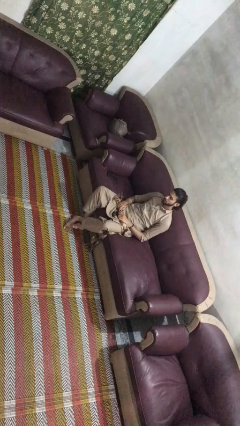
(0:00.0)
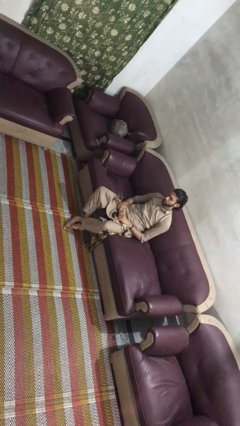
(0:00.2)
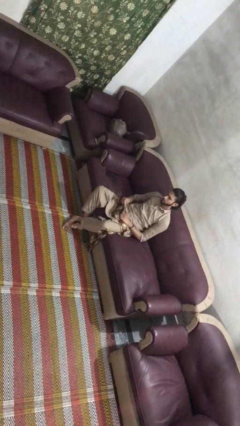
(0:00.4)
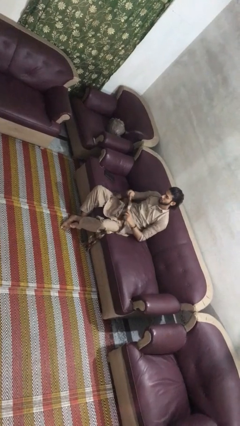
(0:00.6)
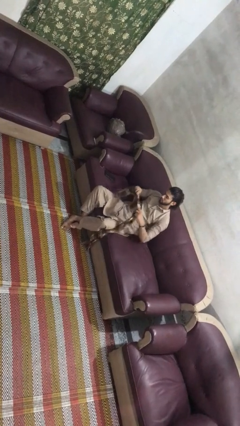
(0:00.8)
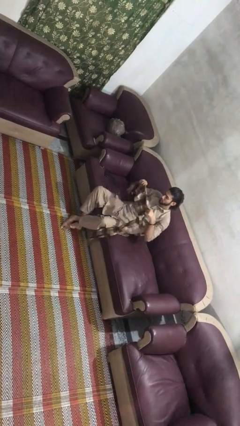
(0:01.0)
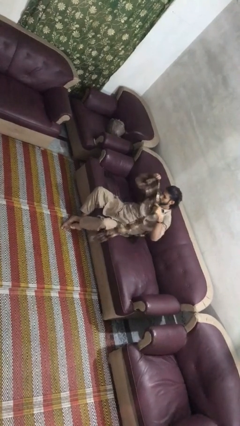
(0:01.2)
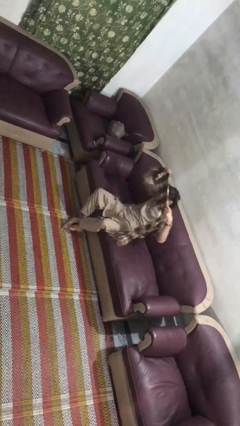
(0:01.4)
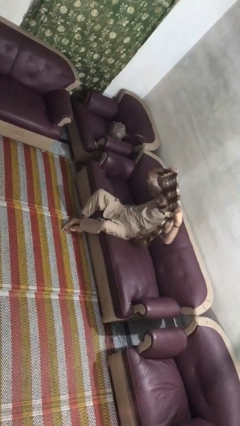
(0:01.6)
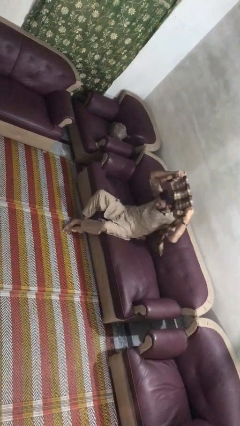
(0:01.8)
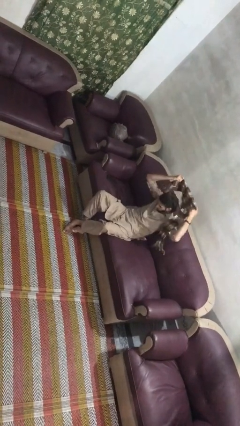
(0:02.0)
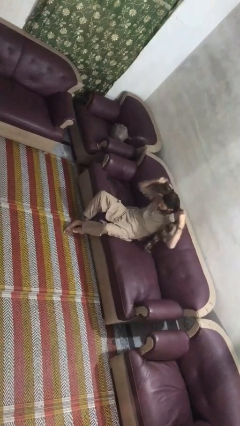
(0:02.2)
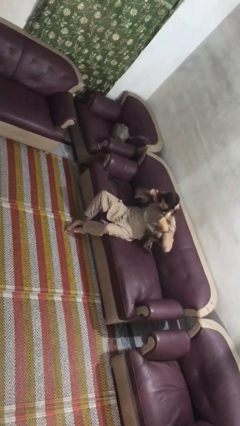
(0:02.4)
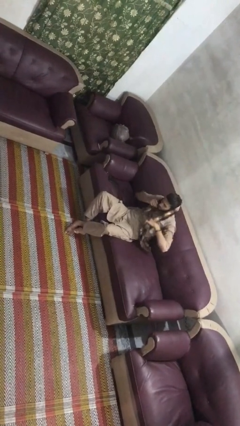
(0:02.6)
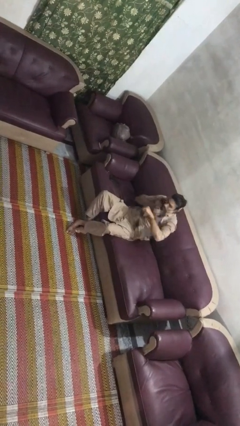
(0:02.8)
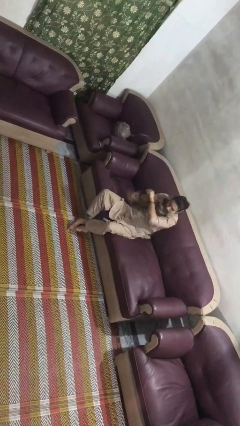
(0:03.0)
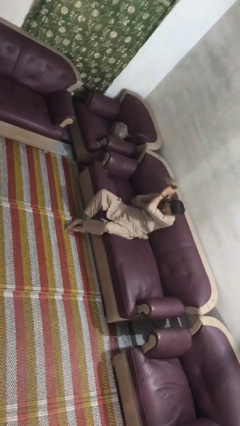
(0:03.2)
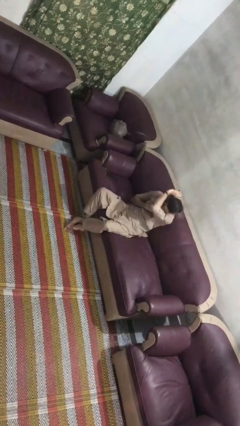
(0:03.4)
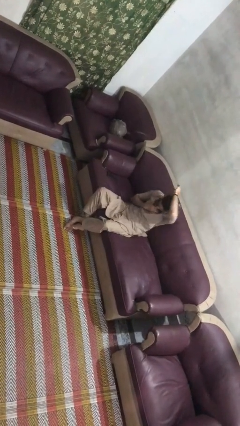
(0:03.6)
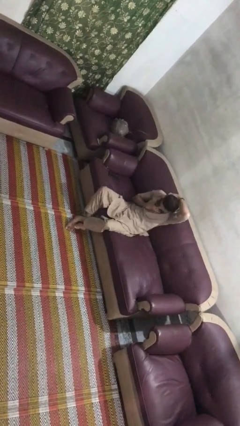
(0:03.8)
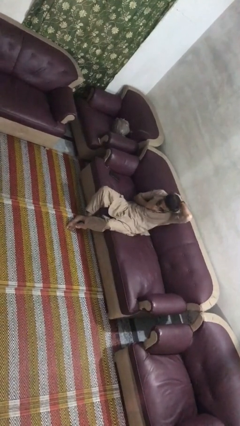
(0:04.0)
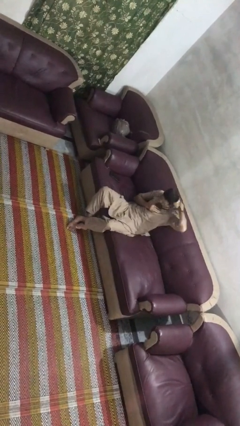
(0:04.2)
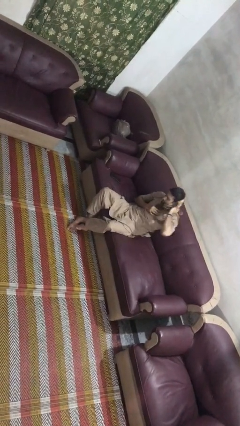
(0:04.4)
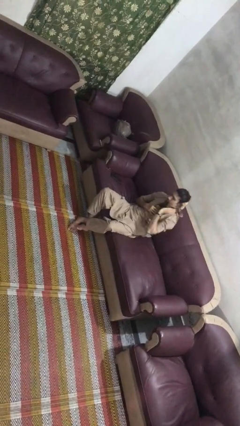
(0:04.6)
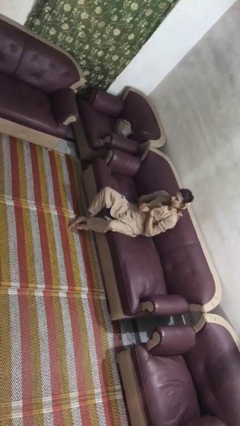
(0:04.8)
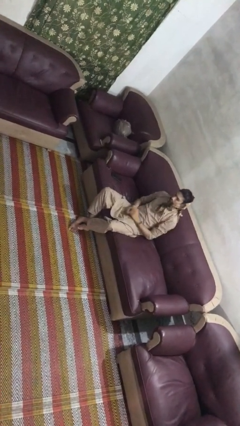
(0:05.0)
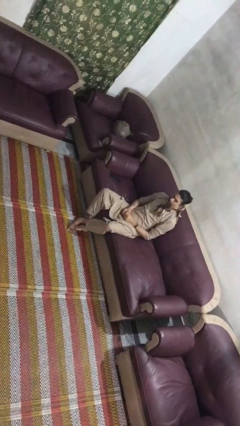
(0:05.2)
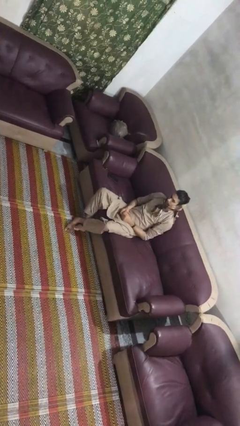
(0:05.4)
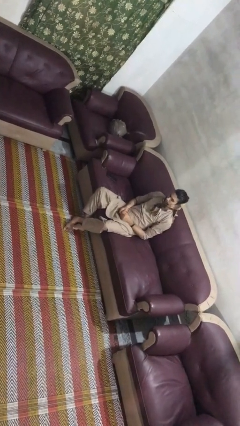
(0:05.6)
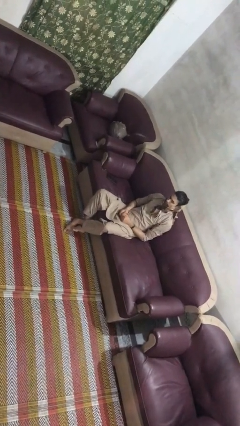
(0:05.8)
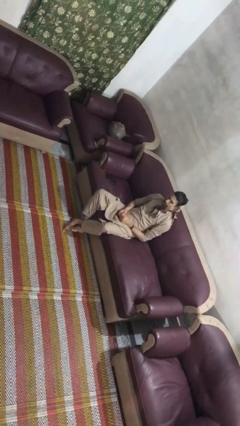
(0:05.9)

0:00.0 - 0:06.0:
person puts on scarf

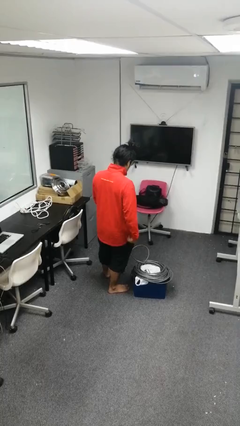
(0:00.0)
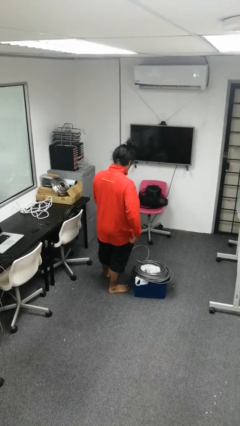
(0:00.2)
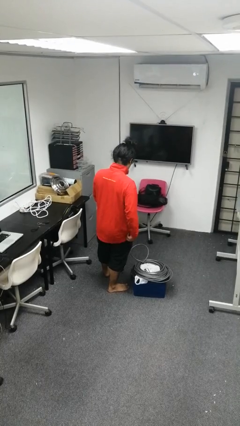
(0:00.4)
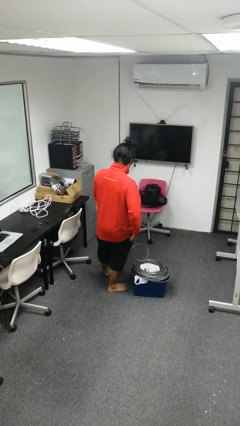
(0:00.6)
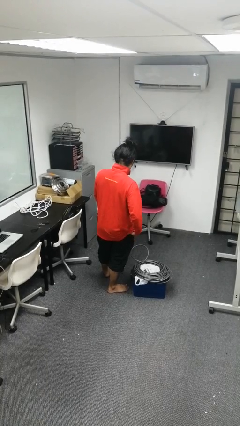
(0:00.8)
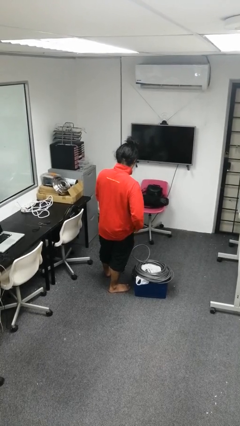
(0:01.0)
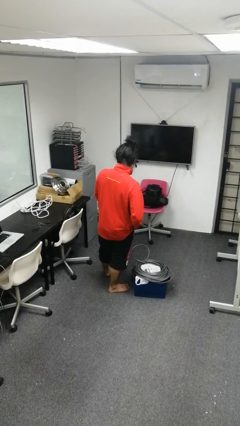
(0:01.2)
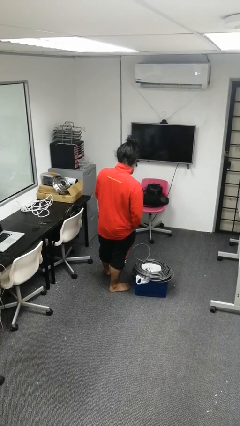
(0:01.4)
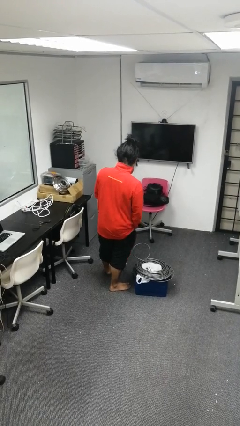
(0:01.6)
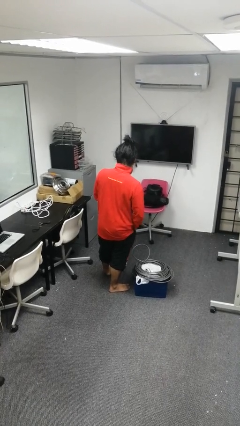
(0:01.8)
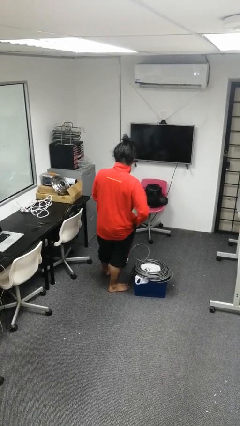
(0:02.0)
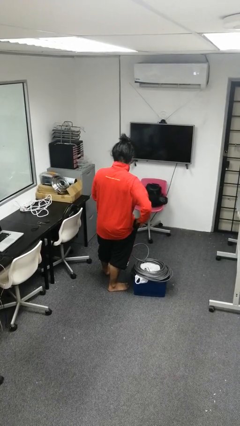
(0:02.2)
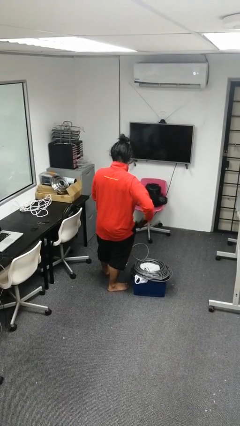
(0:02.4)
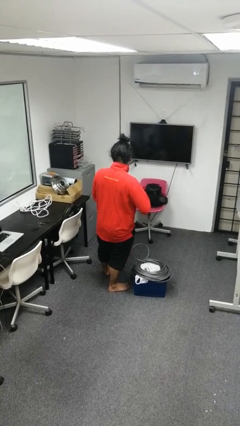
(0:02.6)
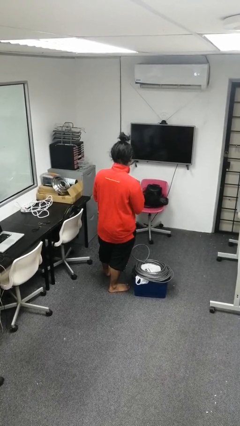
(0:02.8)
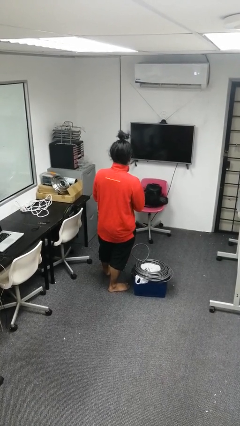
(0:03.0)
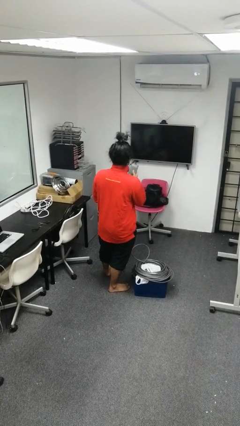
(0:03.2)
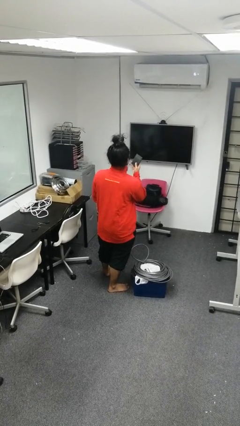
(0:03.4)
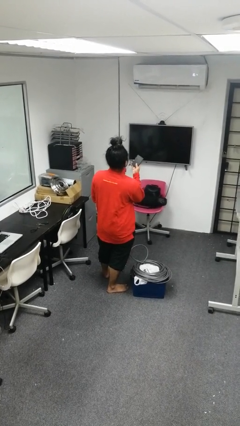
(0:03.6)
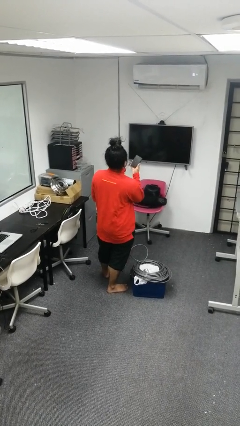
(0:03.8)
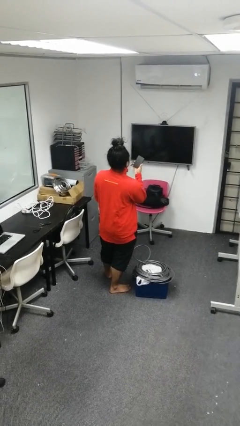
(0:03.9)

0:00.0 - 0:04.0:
person takes phone from pocket

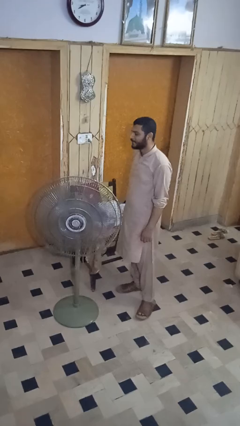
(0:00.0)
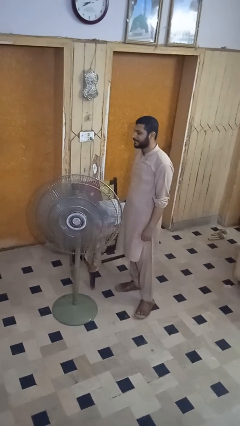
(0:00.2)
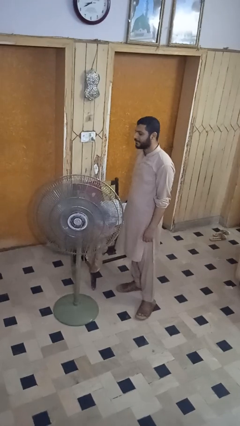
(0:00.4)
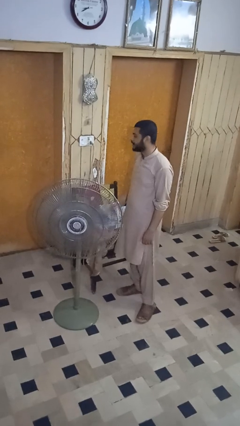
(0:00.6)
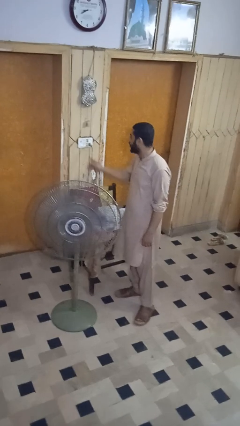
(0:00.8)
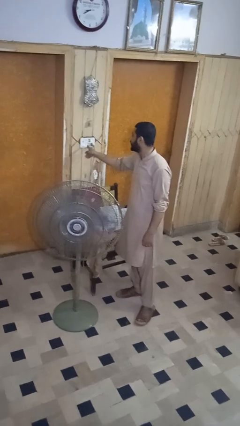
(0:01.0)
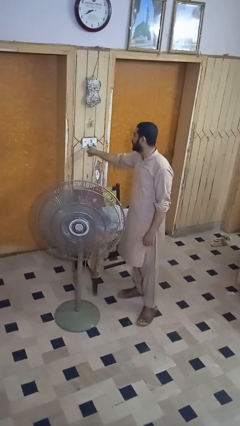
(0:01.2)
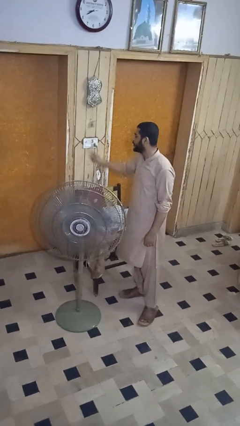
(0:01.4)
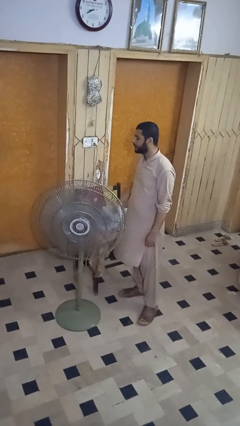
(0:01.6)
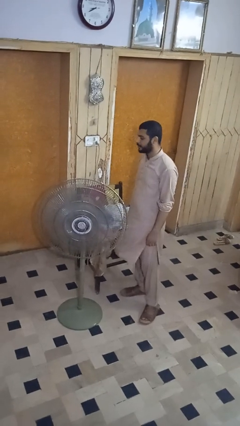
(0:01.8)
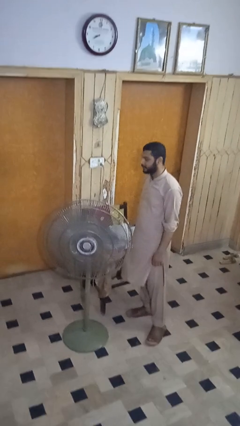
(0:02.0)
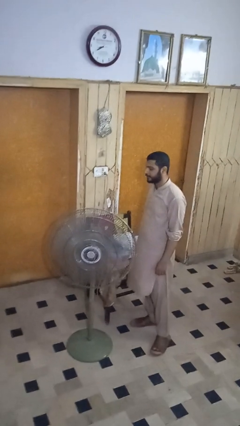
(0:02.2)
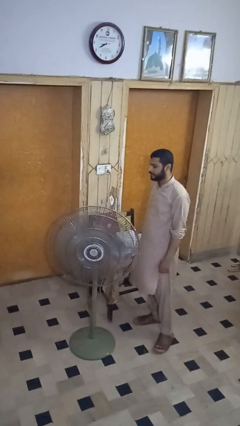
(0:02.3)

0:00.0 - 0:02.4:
person turns off fan

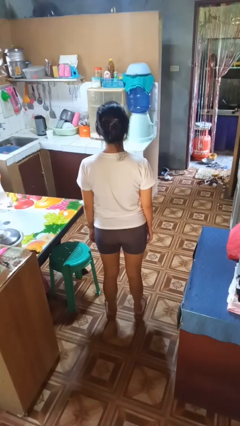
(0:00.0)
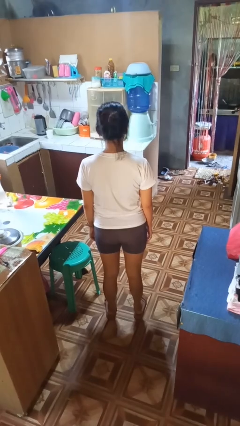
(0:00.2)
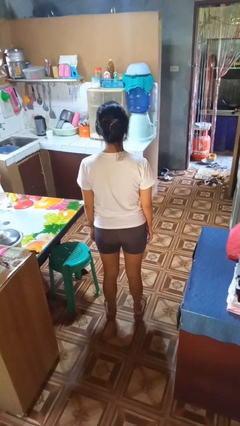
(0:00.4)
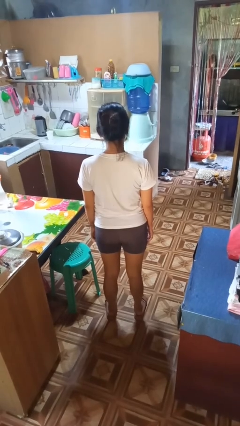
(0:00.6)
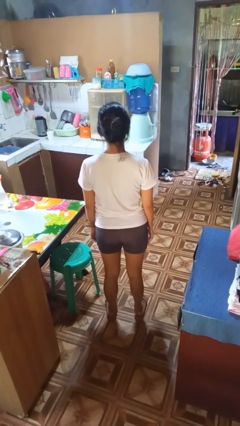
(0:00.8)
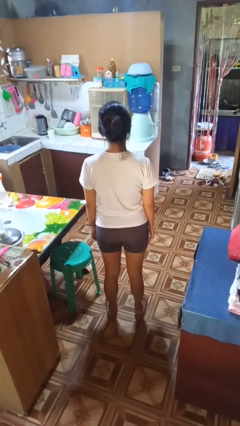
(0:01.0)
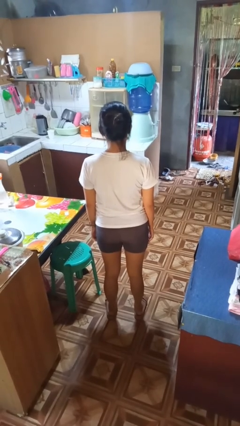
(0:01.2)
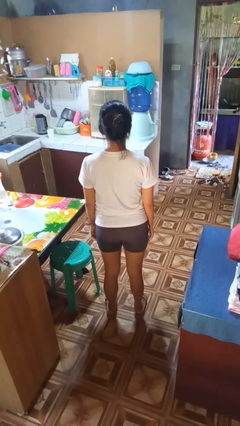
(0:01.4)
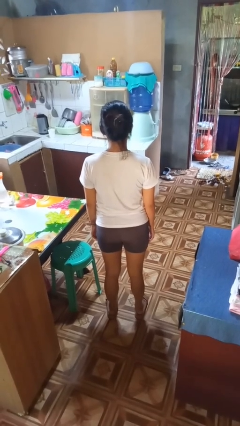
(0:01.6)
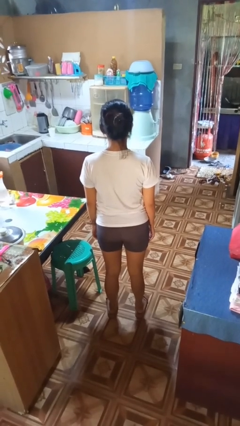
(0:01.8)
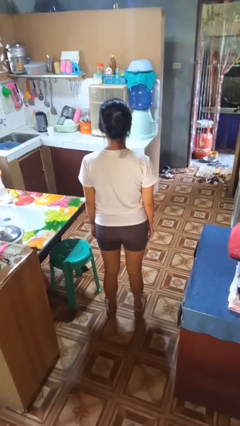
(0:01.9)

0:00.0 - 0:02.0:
person nods head

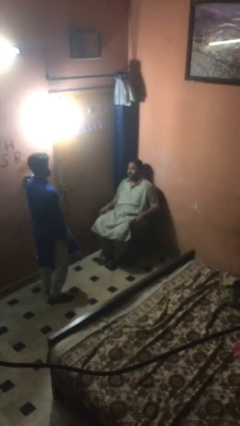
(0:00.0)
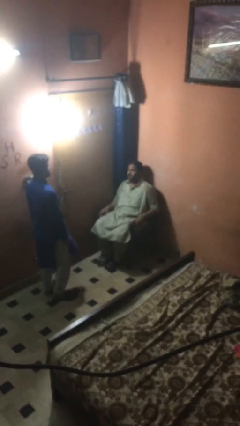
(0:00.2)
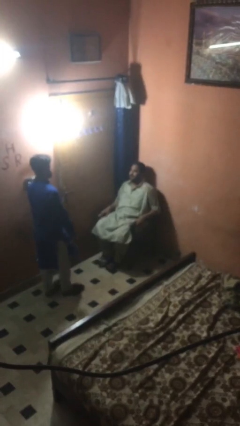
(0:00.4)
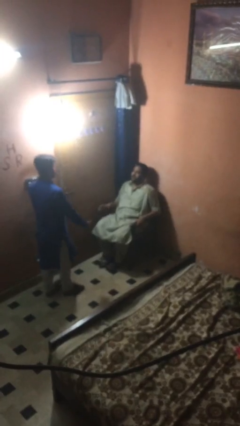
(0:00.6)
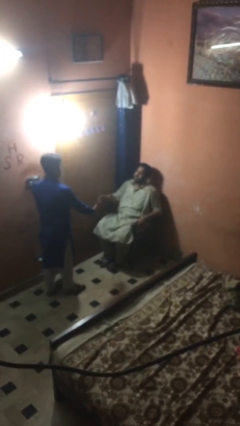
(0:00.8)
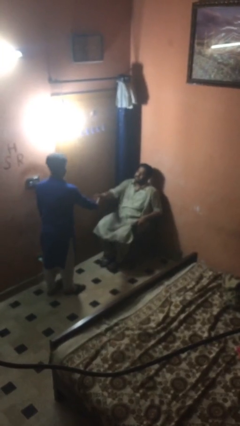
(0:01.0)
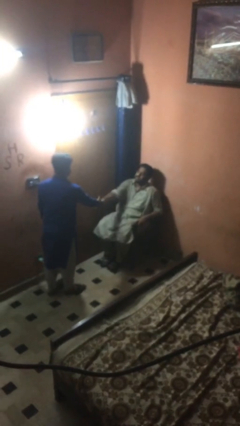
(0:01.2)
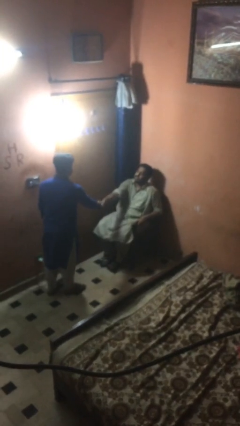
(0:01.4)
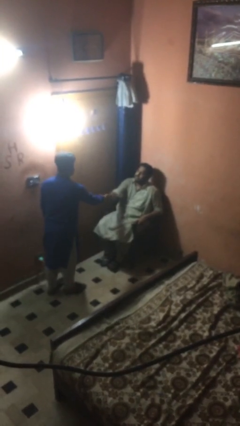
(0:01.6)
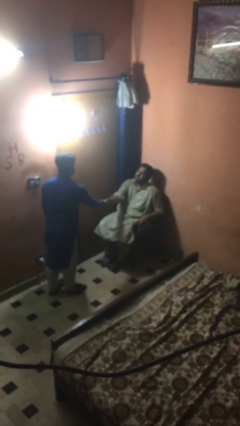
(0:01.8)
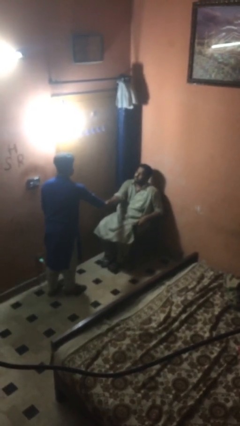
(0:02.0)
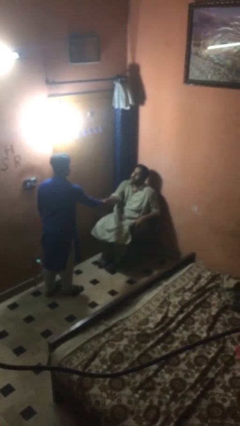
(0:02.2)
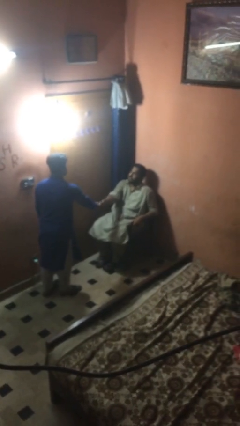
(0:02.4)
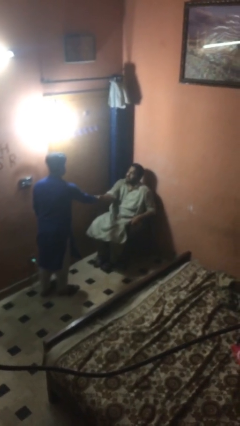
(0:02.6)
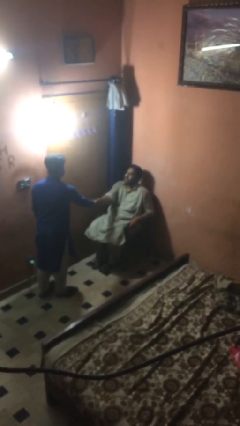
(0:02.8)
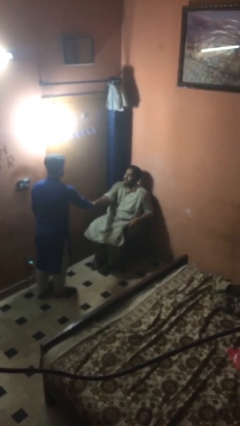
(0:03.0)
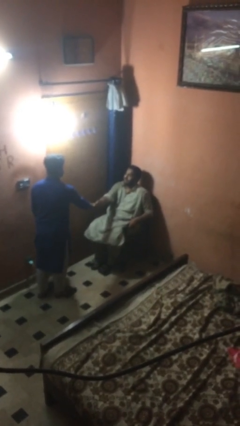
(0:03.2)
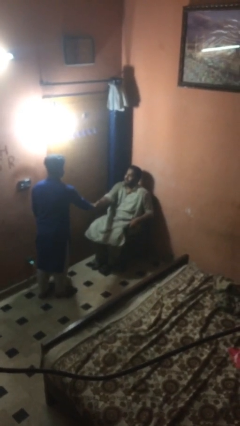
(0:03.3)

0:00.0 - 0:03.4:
person shakes hand
